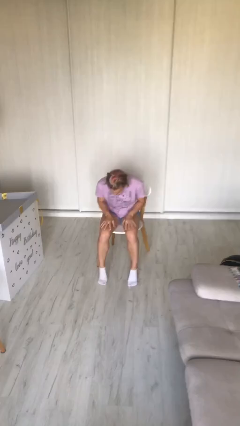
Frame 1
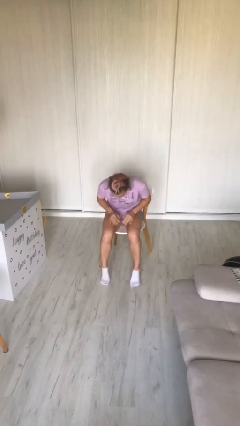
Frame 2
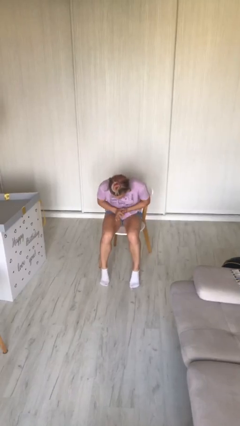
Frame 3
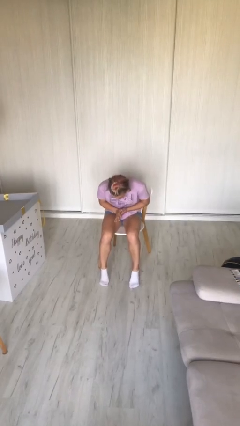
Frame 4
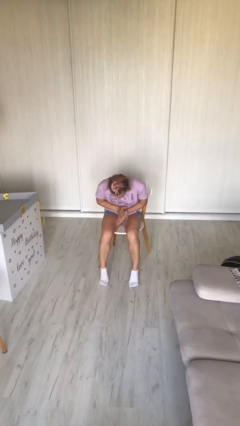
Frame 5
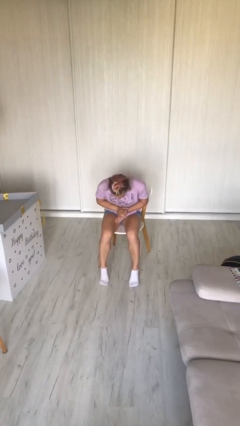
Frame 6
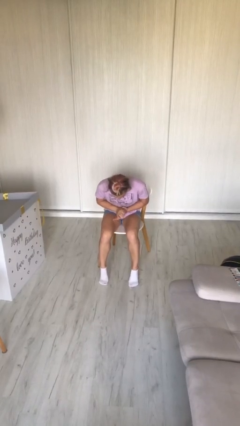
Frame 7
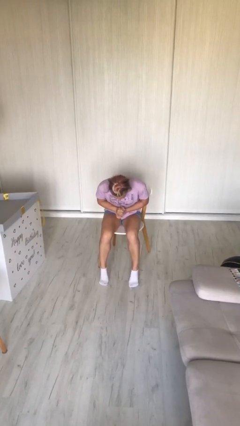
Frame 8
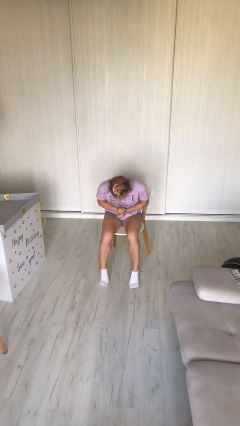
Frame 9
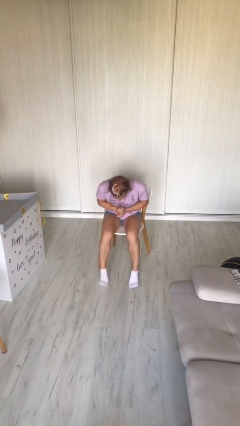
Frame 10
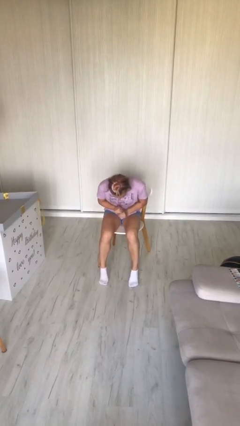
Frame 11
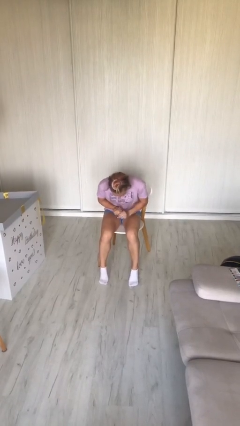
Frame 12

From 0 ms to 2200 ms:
person looks at hands in lap

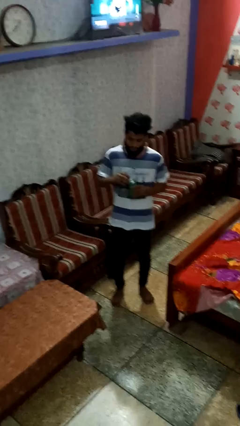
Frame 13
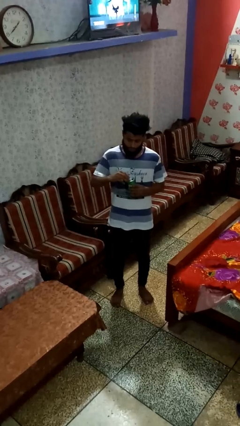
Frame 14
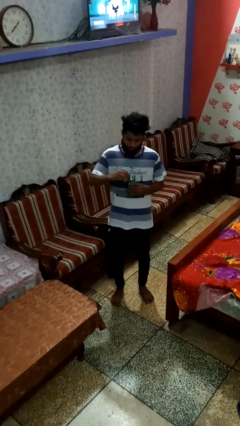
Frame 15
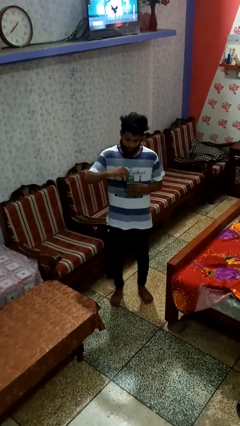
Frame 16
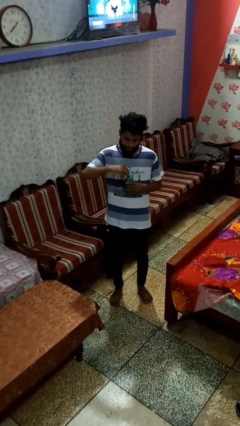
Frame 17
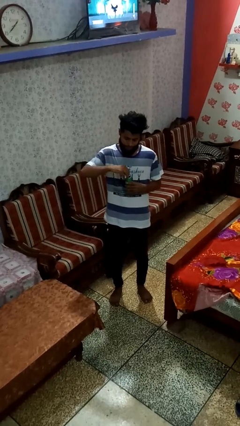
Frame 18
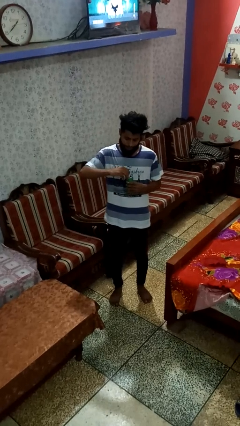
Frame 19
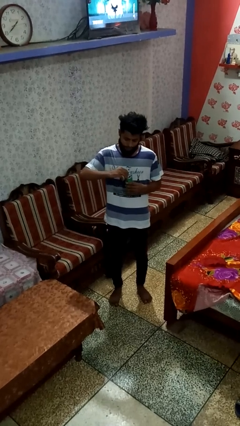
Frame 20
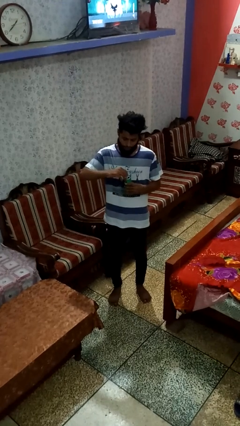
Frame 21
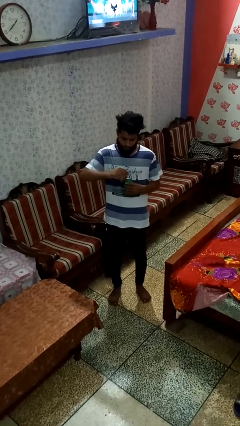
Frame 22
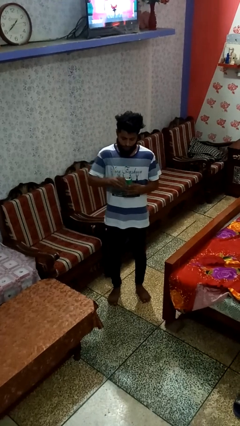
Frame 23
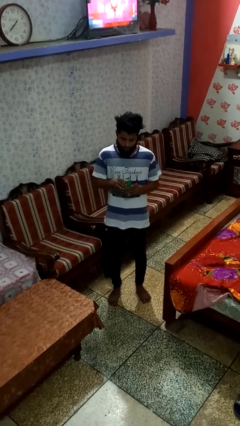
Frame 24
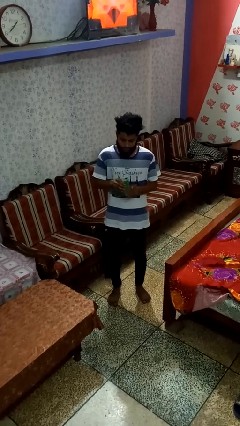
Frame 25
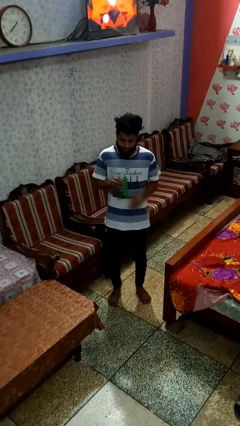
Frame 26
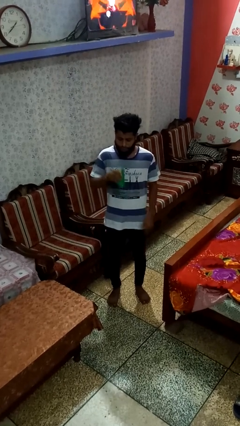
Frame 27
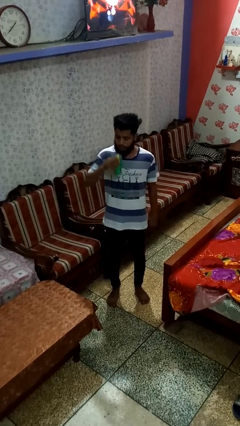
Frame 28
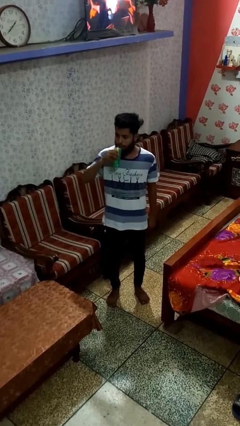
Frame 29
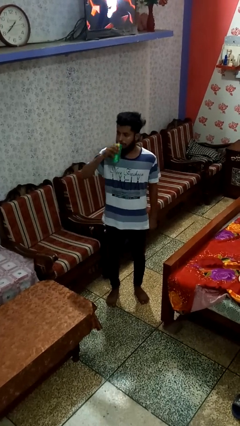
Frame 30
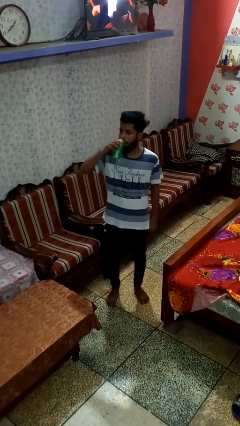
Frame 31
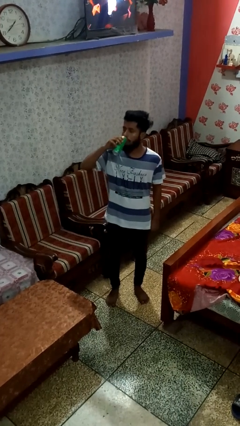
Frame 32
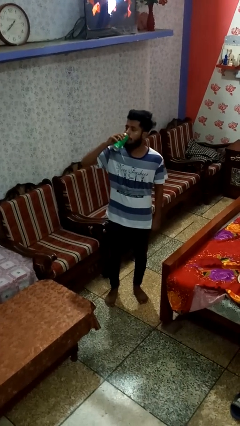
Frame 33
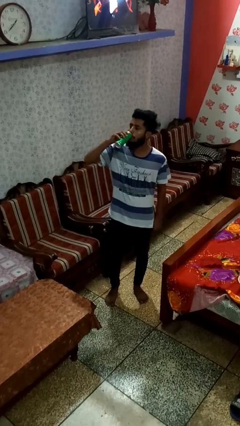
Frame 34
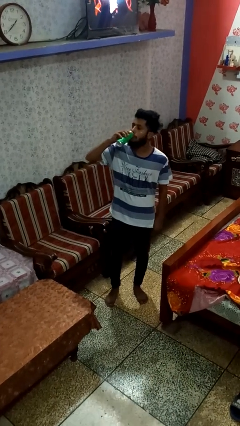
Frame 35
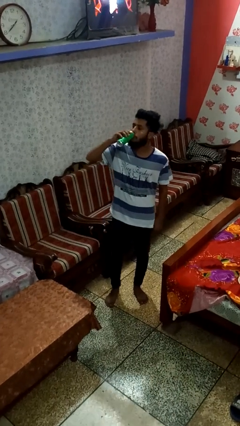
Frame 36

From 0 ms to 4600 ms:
person opens beverage can

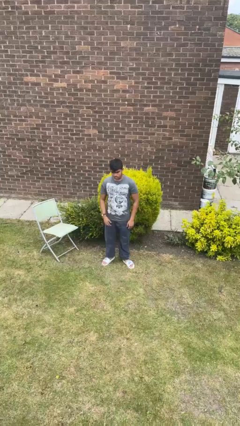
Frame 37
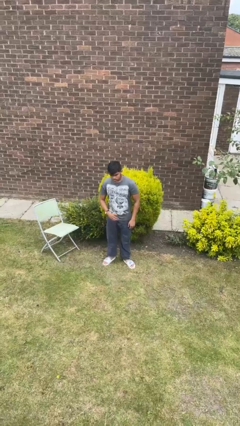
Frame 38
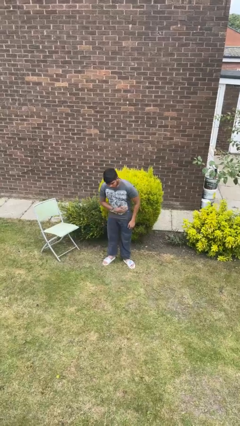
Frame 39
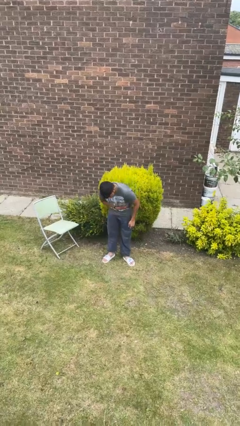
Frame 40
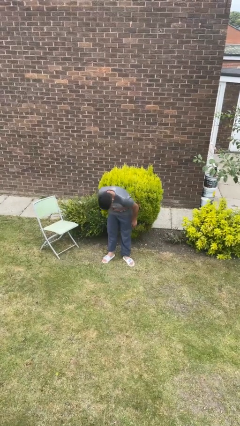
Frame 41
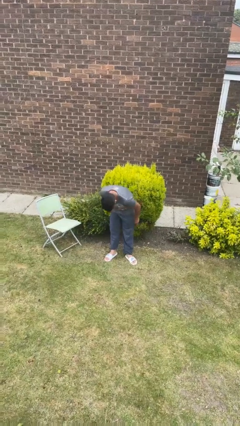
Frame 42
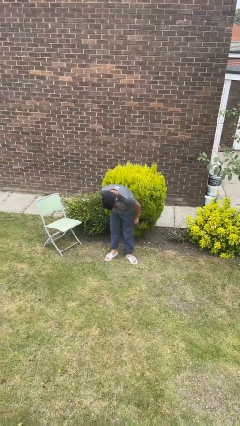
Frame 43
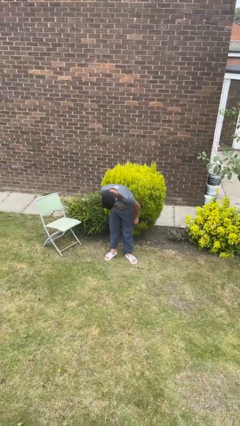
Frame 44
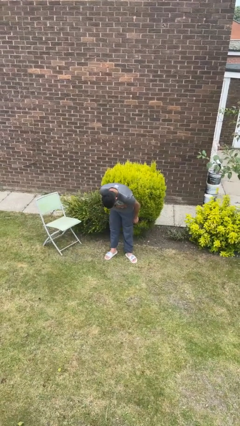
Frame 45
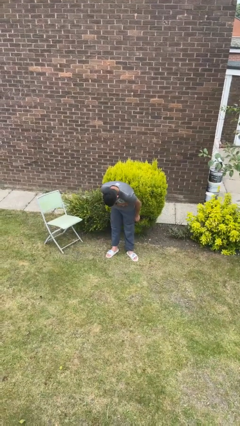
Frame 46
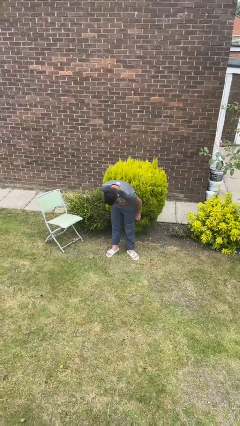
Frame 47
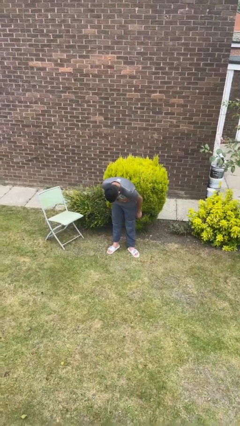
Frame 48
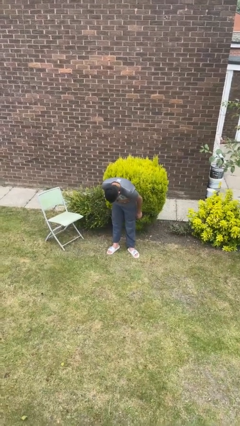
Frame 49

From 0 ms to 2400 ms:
person bows

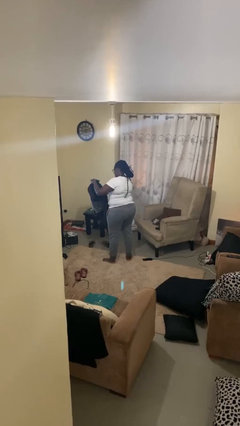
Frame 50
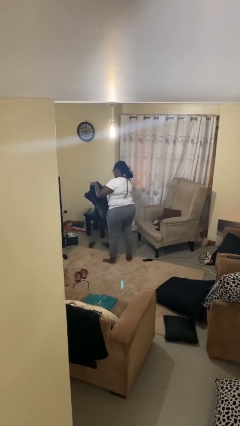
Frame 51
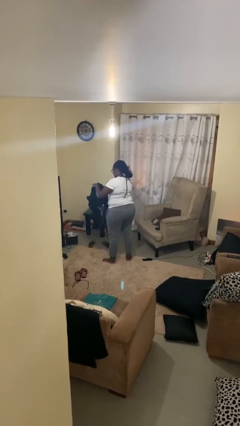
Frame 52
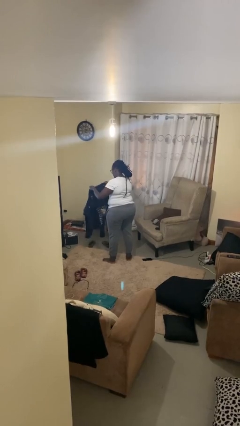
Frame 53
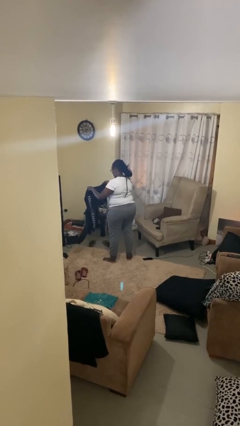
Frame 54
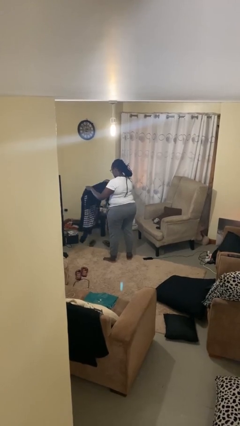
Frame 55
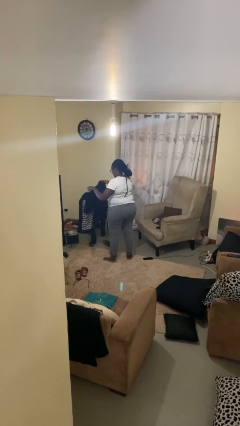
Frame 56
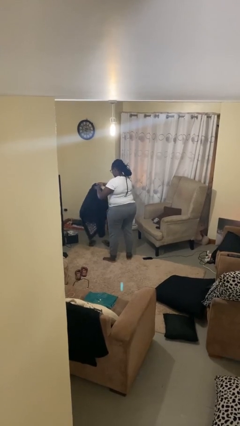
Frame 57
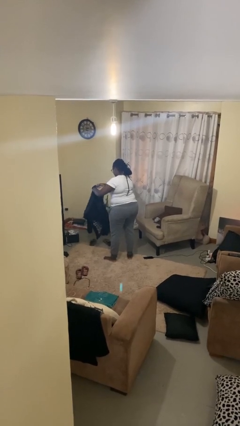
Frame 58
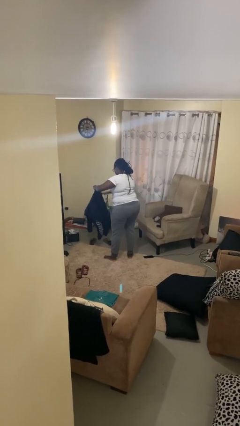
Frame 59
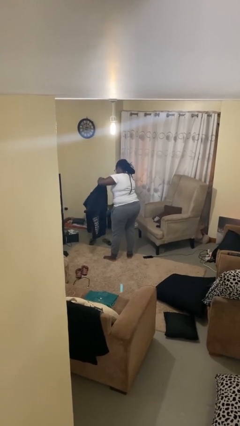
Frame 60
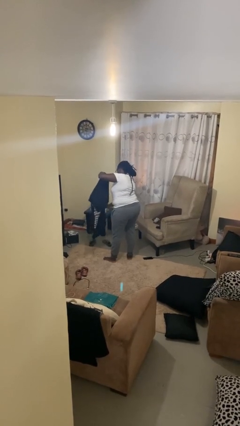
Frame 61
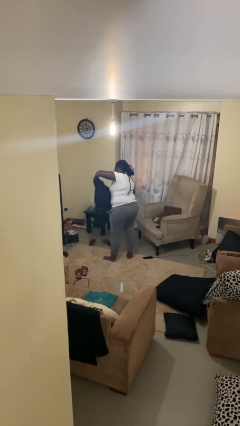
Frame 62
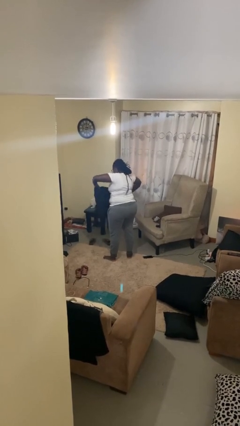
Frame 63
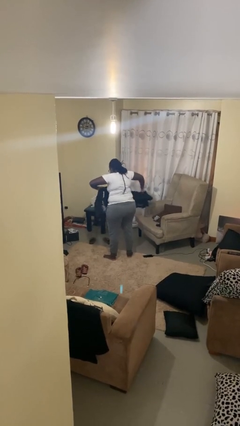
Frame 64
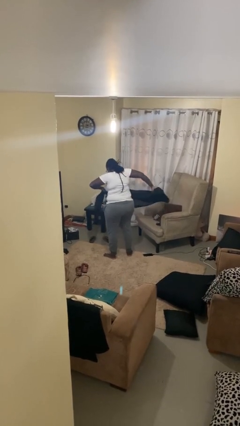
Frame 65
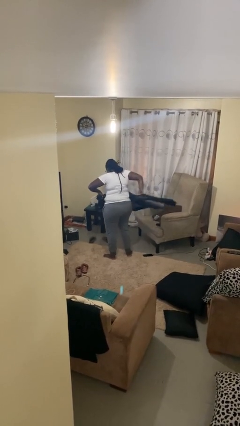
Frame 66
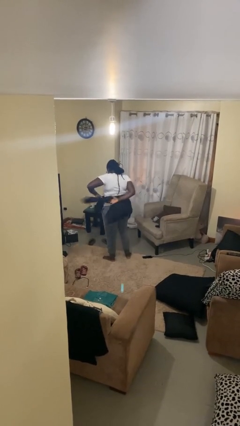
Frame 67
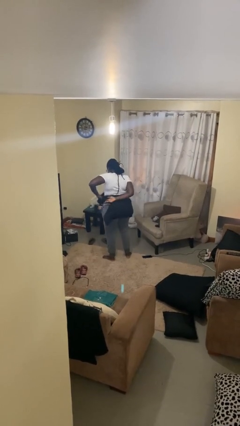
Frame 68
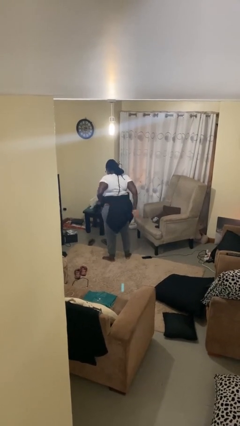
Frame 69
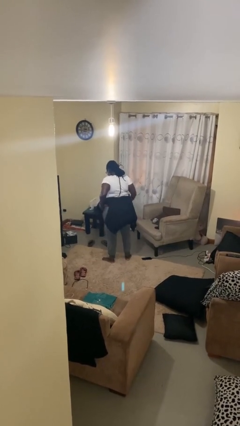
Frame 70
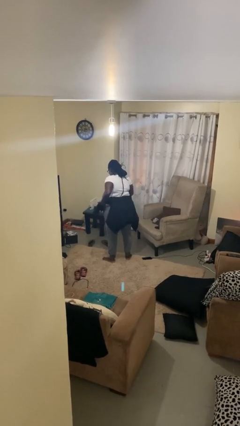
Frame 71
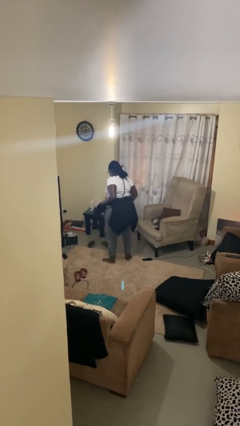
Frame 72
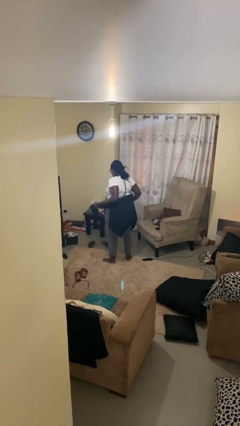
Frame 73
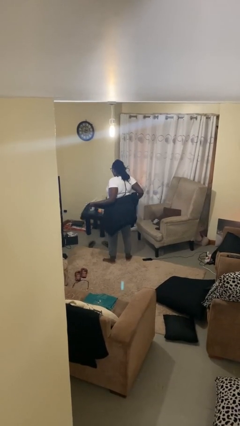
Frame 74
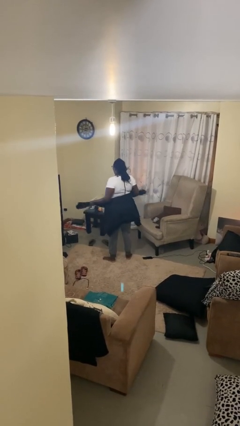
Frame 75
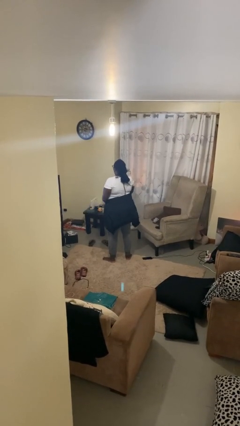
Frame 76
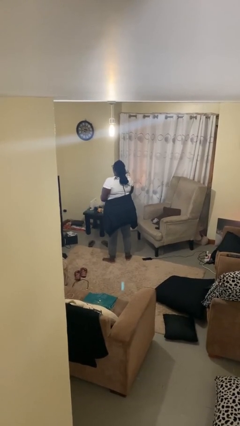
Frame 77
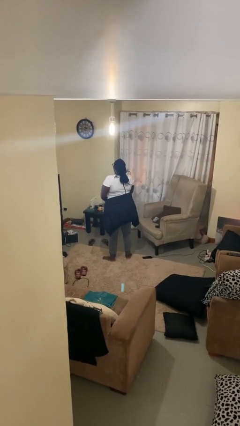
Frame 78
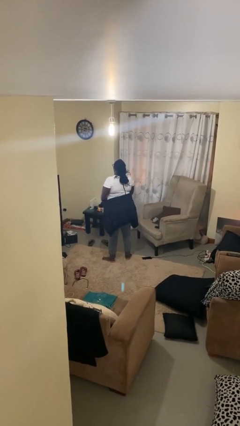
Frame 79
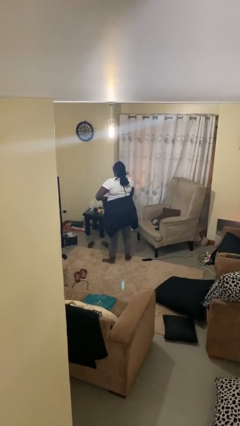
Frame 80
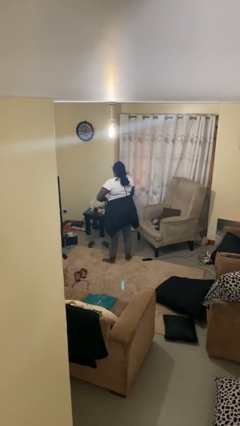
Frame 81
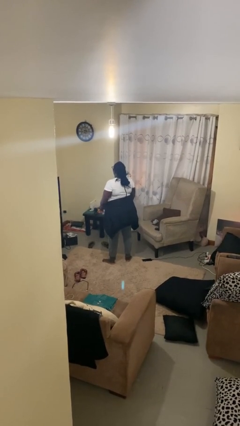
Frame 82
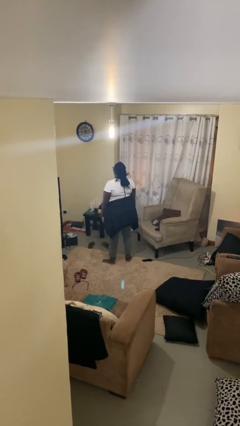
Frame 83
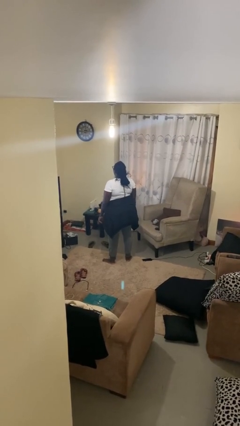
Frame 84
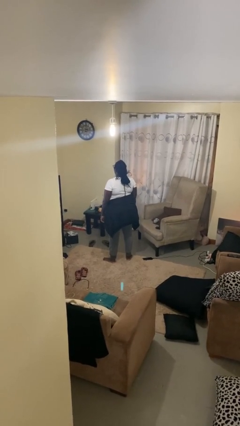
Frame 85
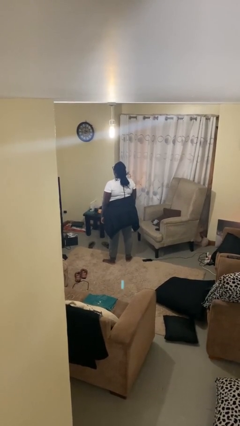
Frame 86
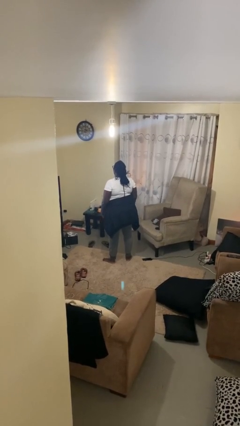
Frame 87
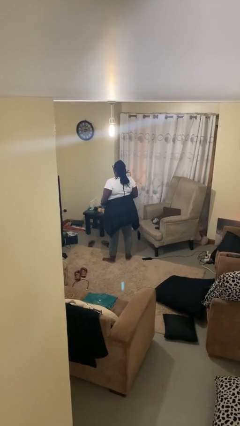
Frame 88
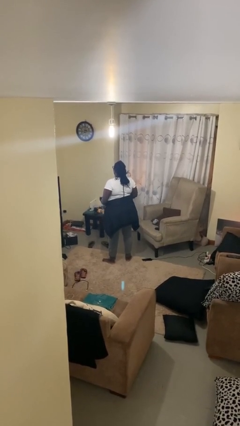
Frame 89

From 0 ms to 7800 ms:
person ties jacket around waist

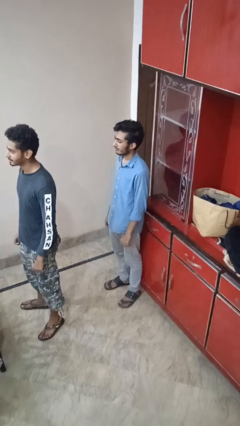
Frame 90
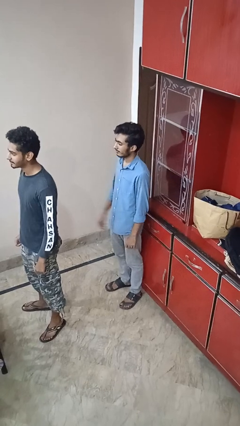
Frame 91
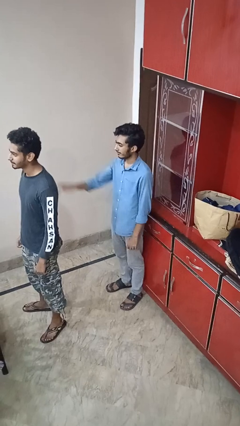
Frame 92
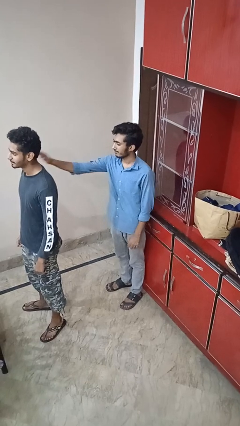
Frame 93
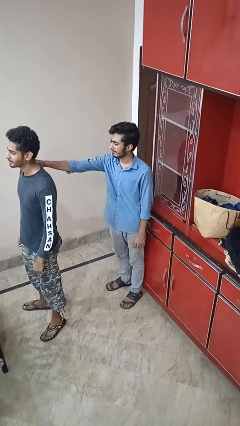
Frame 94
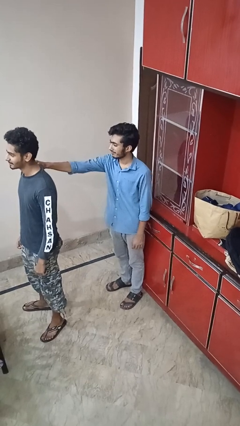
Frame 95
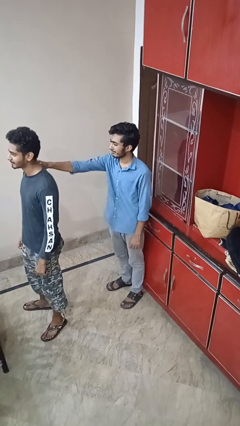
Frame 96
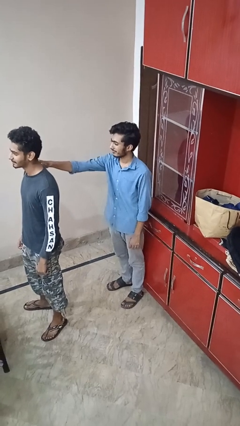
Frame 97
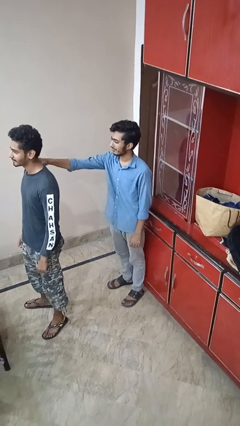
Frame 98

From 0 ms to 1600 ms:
person grabs person by shoulder
